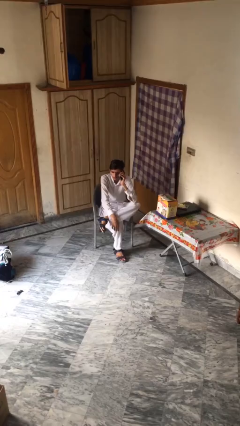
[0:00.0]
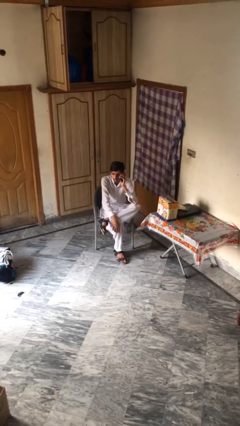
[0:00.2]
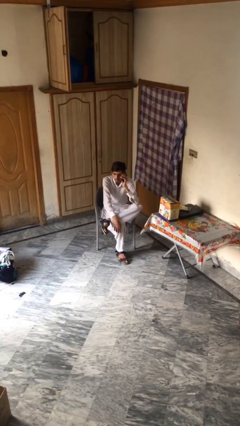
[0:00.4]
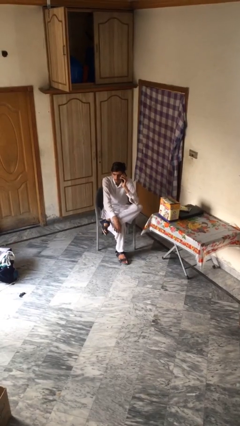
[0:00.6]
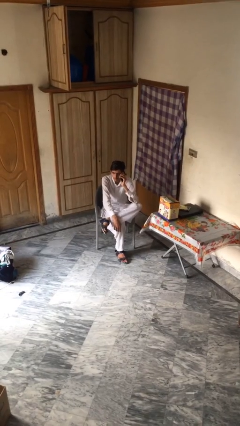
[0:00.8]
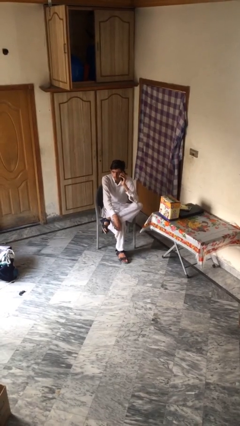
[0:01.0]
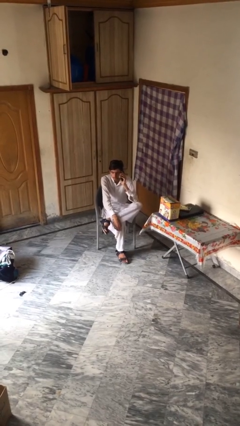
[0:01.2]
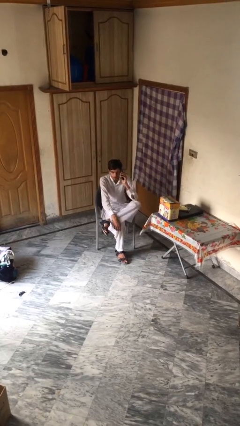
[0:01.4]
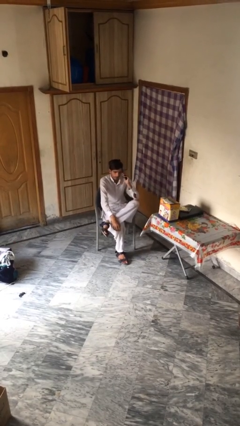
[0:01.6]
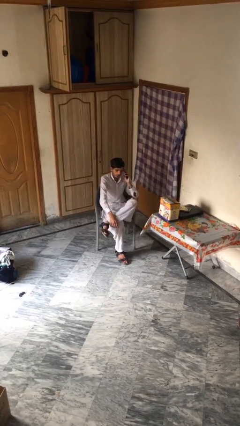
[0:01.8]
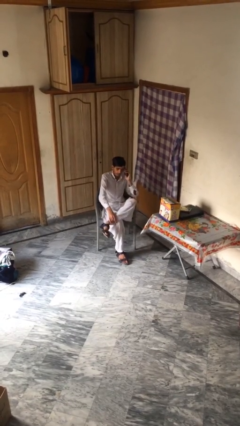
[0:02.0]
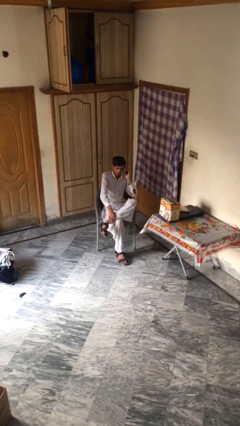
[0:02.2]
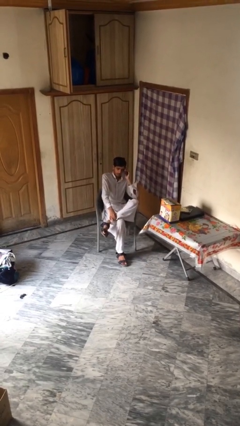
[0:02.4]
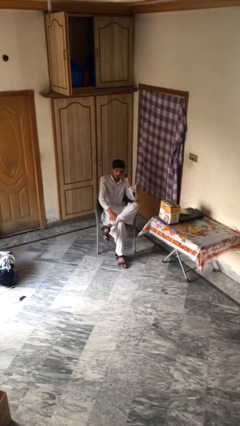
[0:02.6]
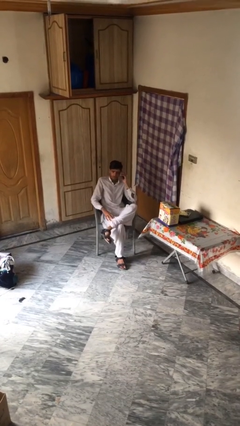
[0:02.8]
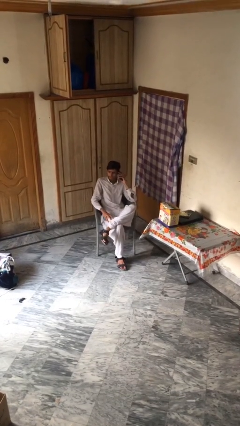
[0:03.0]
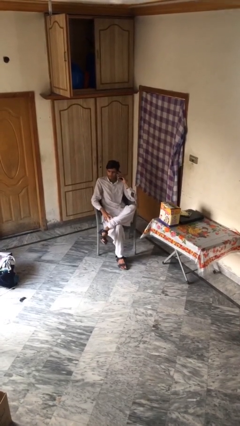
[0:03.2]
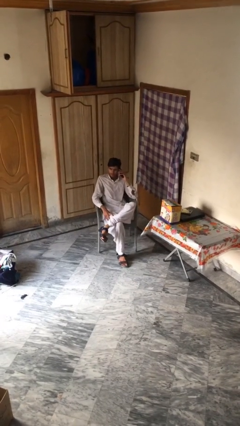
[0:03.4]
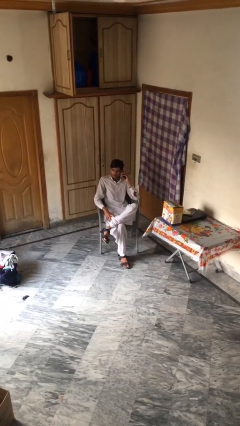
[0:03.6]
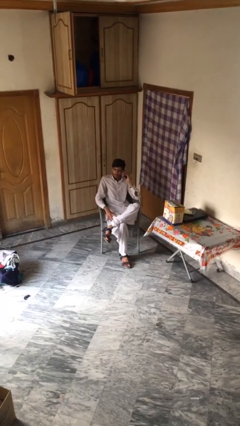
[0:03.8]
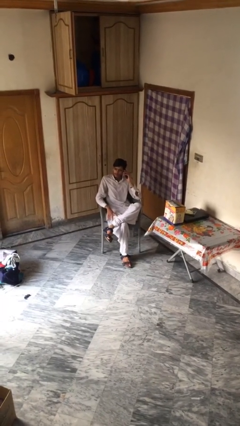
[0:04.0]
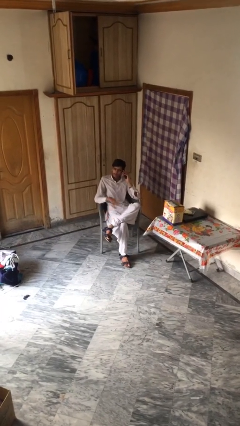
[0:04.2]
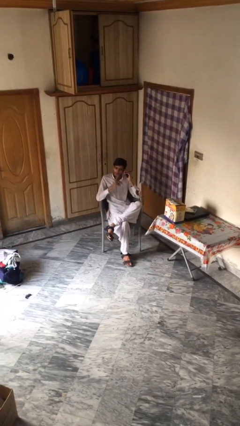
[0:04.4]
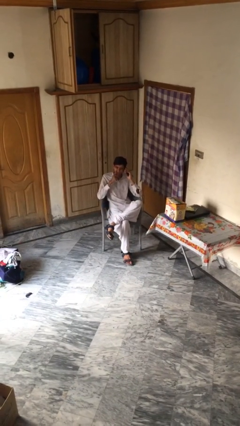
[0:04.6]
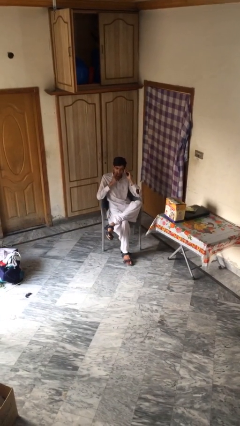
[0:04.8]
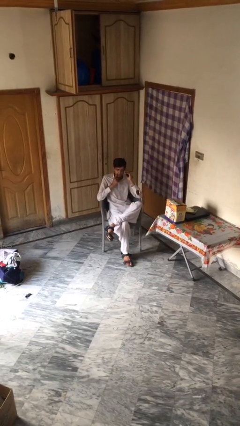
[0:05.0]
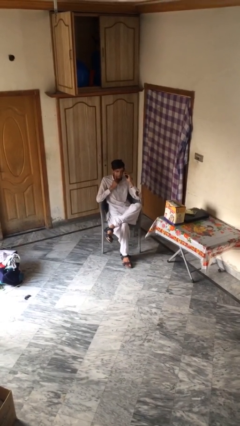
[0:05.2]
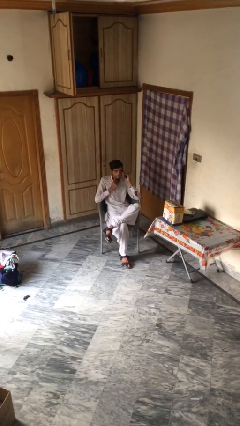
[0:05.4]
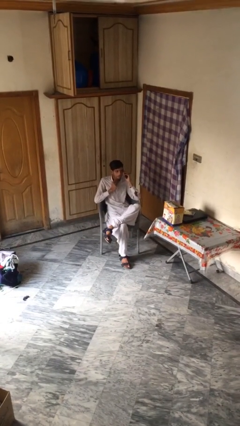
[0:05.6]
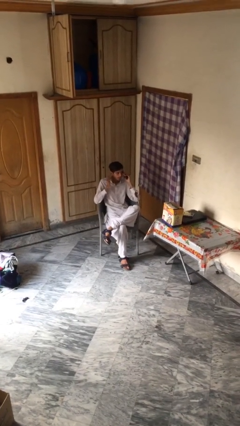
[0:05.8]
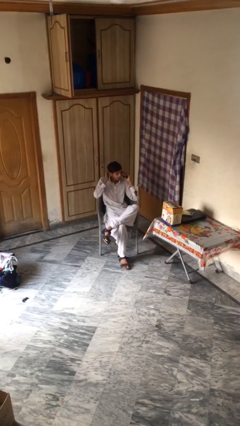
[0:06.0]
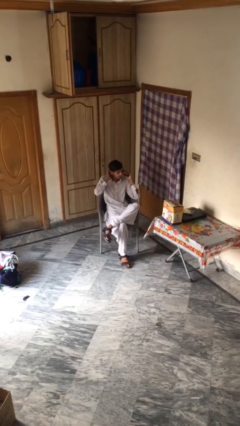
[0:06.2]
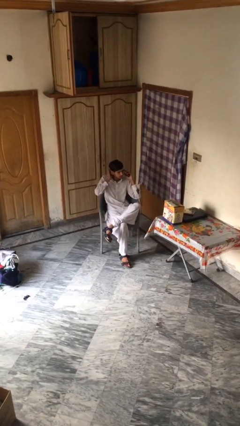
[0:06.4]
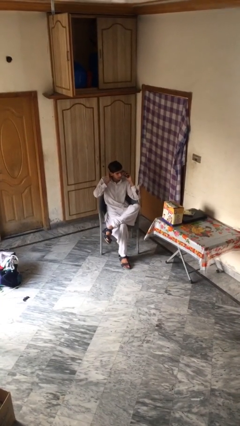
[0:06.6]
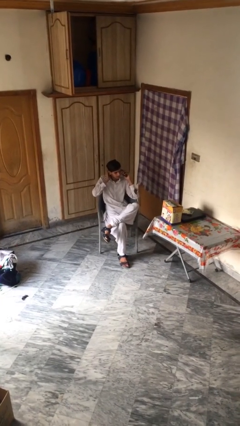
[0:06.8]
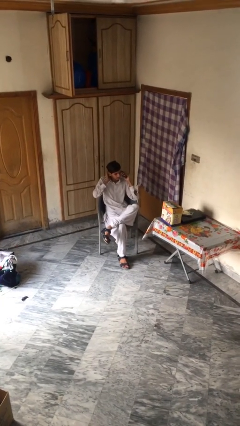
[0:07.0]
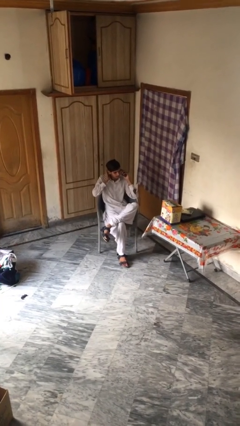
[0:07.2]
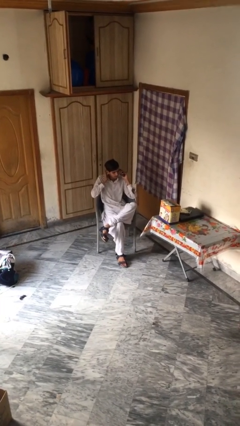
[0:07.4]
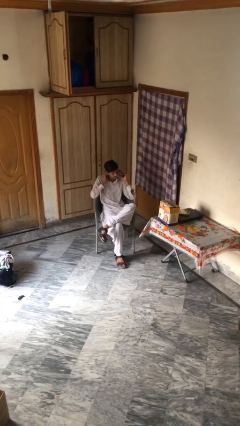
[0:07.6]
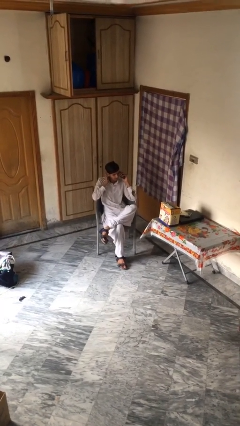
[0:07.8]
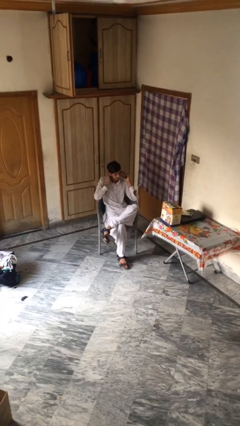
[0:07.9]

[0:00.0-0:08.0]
person talks on phone

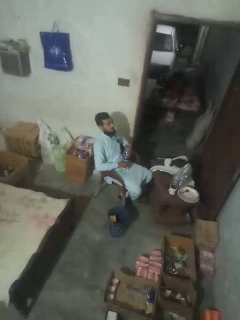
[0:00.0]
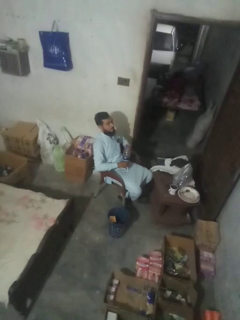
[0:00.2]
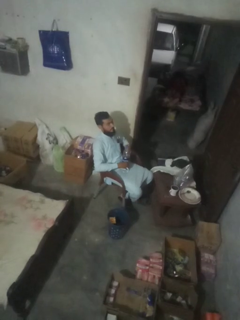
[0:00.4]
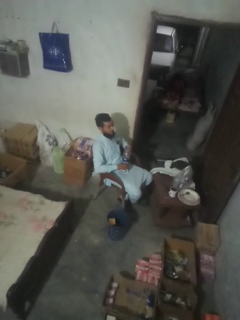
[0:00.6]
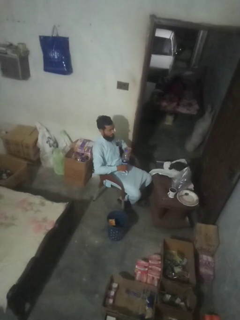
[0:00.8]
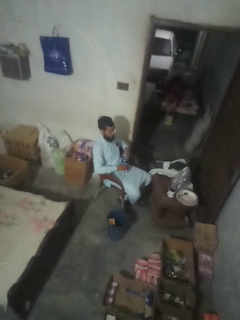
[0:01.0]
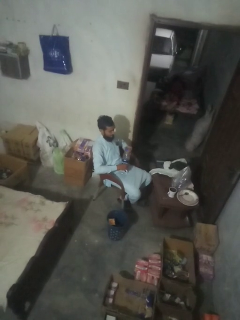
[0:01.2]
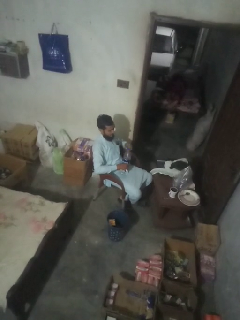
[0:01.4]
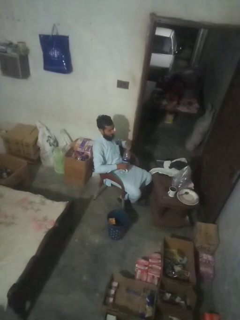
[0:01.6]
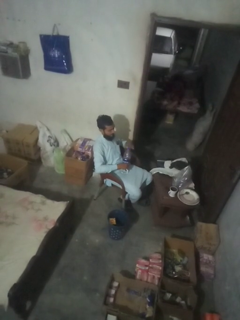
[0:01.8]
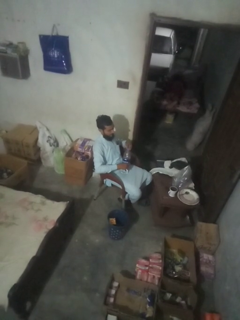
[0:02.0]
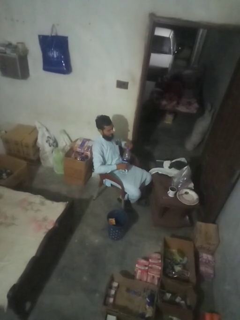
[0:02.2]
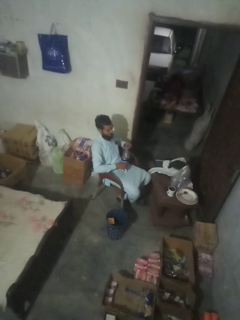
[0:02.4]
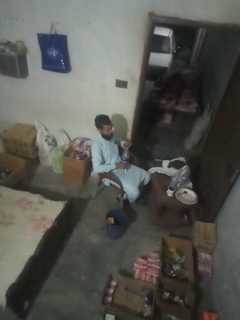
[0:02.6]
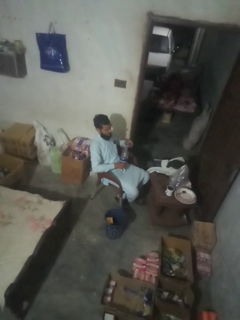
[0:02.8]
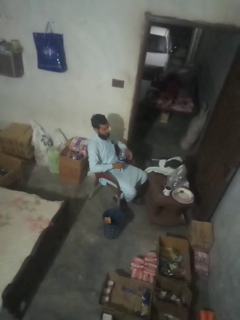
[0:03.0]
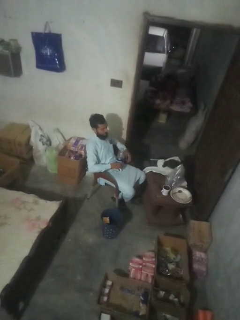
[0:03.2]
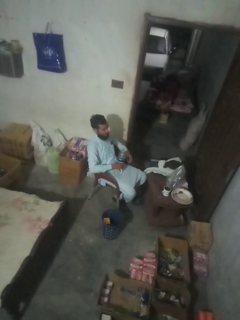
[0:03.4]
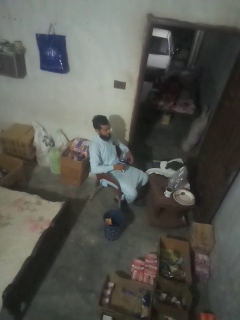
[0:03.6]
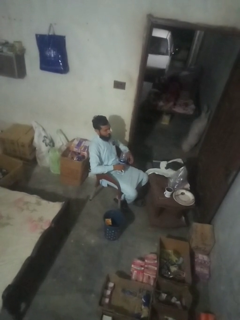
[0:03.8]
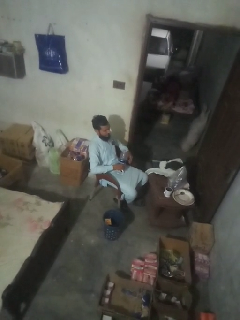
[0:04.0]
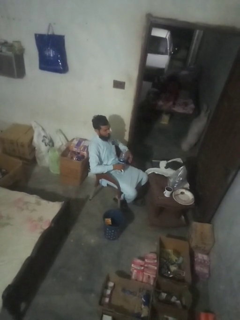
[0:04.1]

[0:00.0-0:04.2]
person unscrews lid from bottle

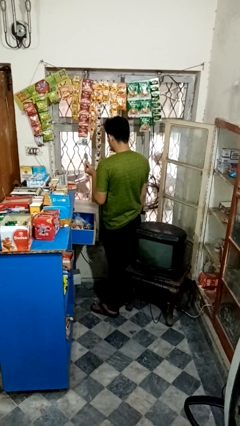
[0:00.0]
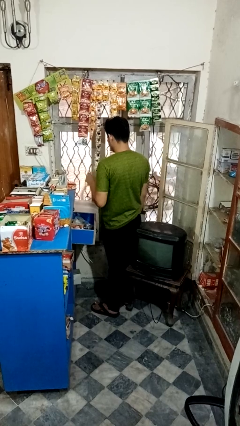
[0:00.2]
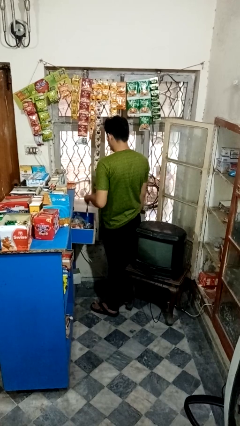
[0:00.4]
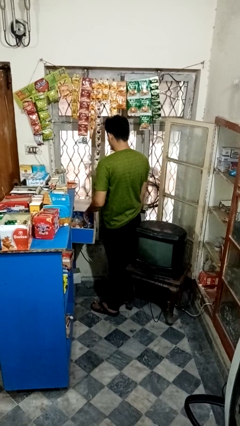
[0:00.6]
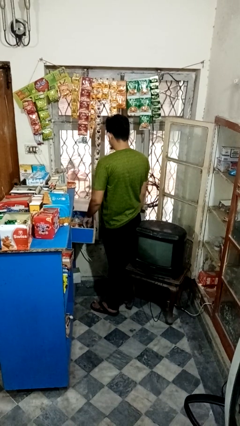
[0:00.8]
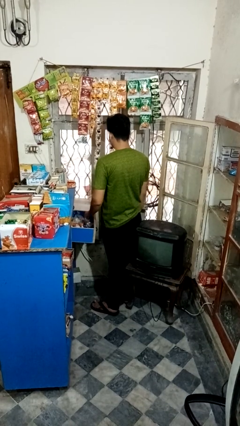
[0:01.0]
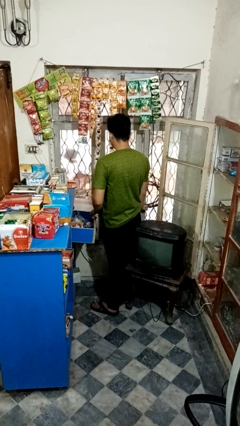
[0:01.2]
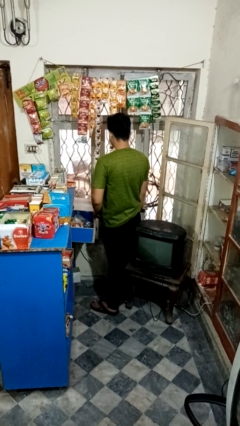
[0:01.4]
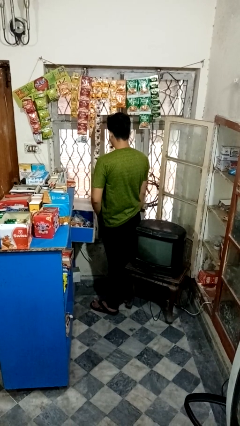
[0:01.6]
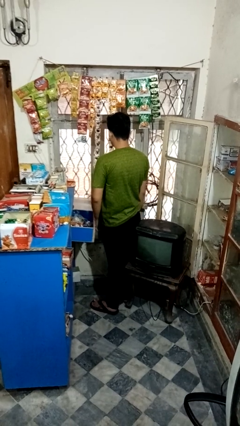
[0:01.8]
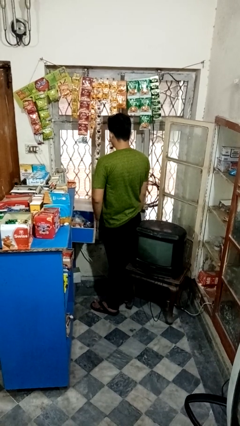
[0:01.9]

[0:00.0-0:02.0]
person puts object into kitchen drawer

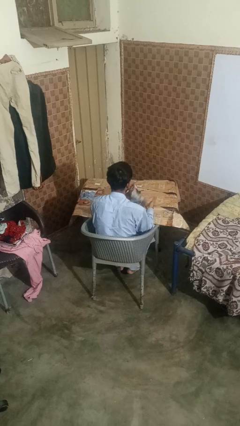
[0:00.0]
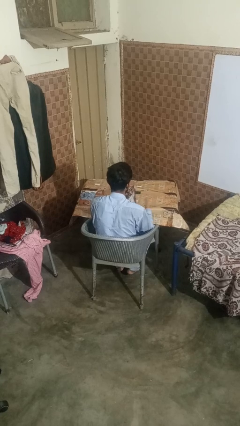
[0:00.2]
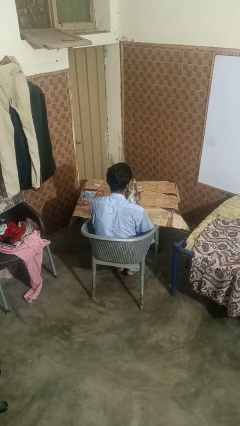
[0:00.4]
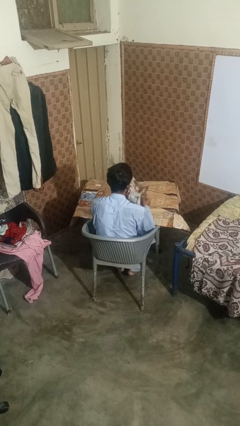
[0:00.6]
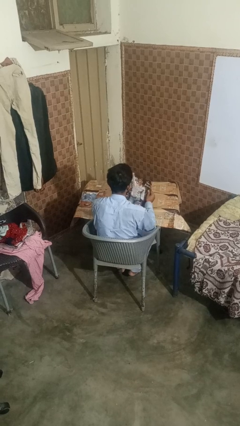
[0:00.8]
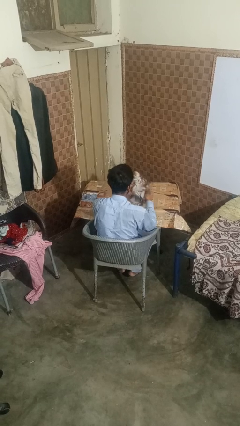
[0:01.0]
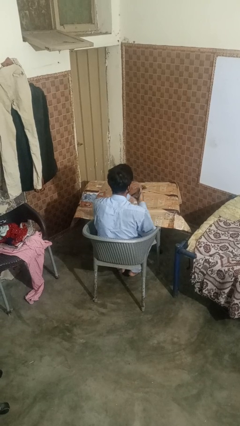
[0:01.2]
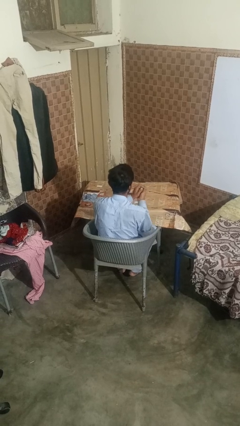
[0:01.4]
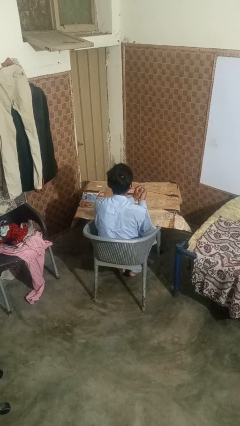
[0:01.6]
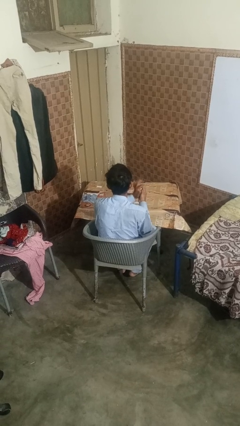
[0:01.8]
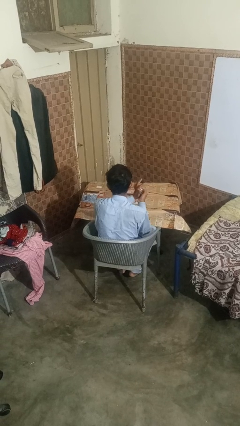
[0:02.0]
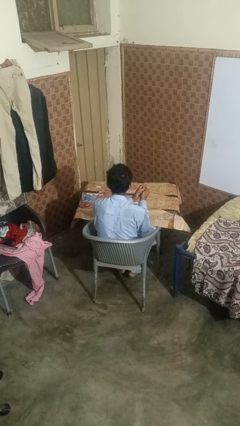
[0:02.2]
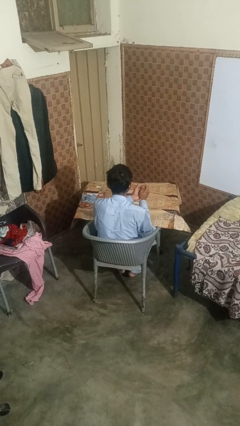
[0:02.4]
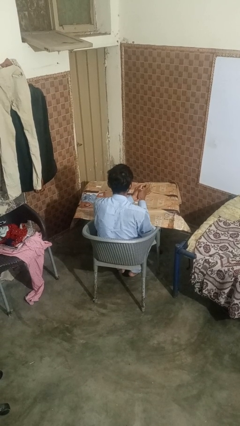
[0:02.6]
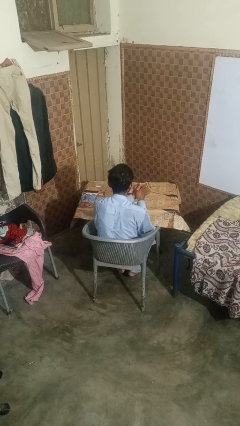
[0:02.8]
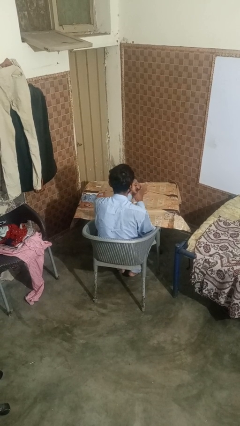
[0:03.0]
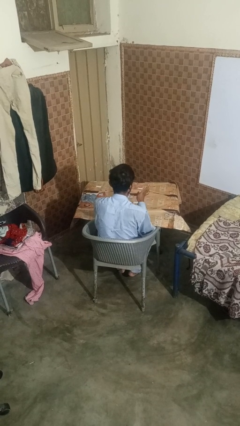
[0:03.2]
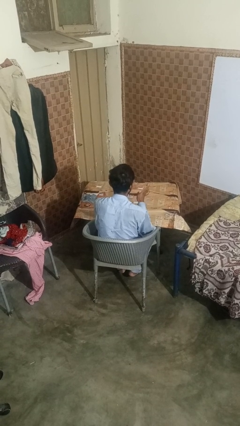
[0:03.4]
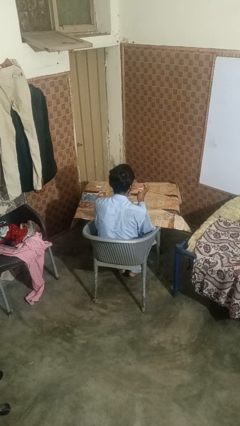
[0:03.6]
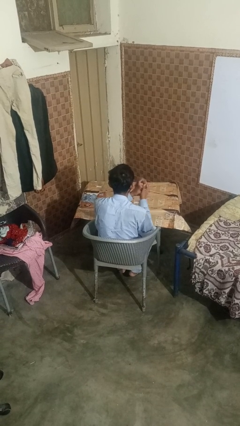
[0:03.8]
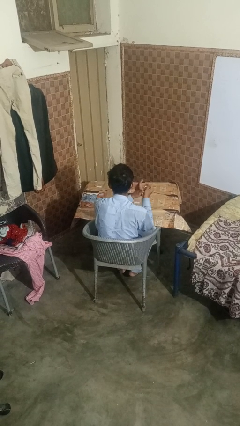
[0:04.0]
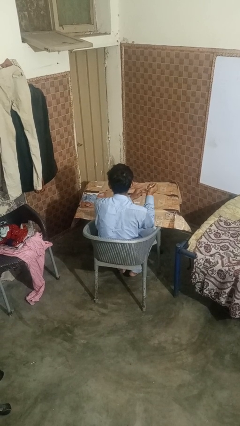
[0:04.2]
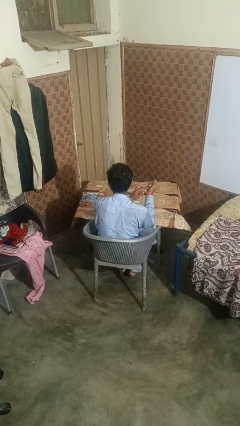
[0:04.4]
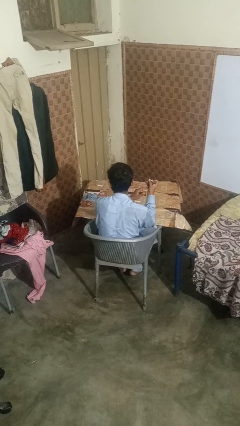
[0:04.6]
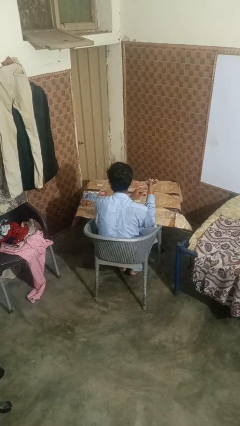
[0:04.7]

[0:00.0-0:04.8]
person crumples paper
